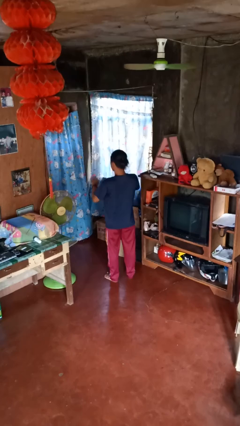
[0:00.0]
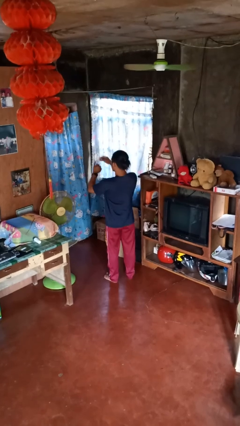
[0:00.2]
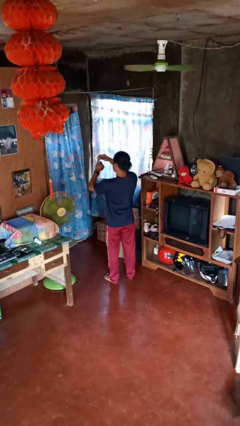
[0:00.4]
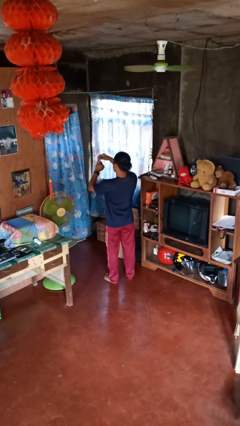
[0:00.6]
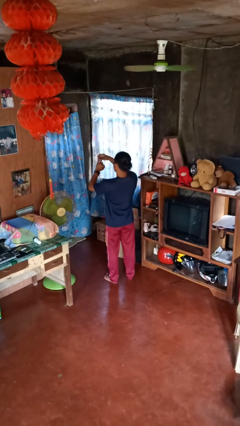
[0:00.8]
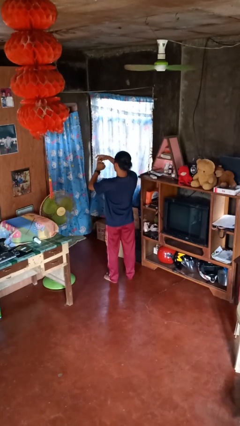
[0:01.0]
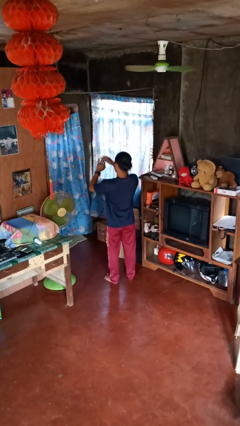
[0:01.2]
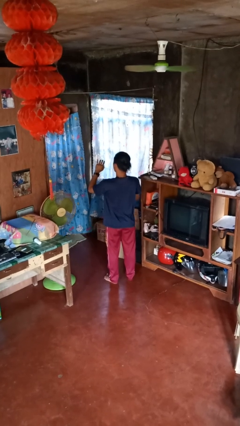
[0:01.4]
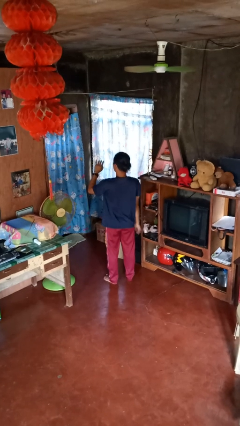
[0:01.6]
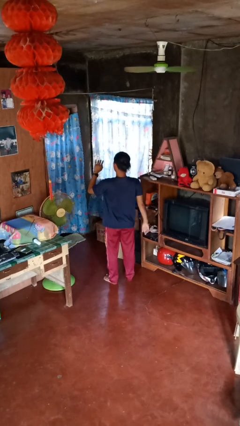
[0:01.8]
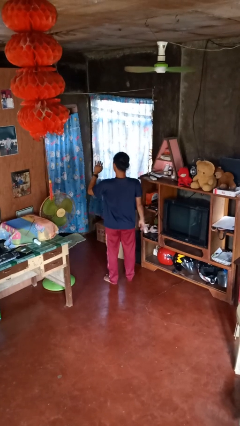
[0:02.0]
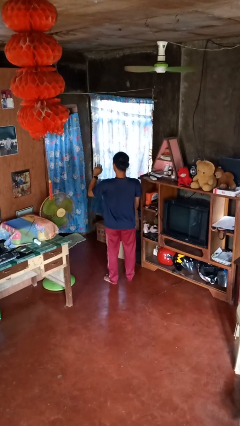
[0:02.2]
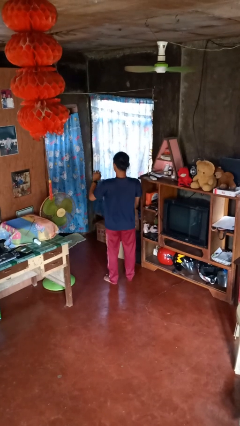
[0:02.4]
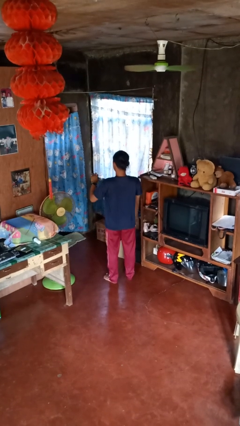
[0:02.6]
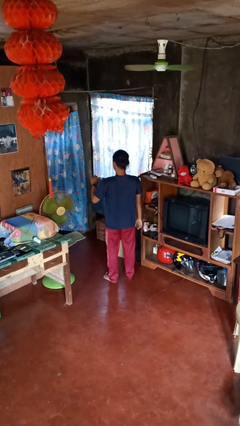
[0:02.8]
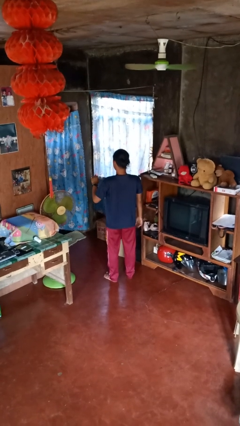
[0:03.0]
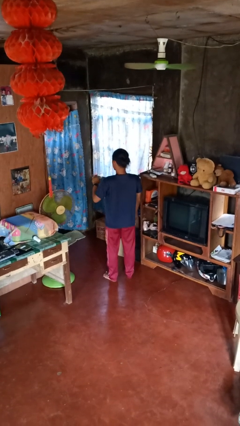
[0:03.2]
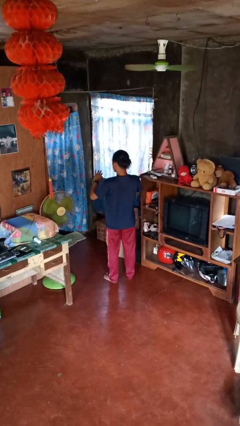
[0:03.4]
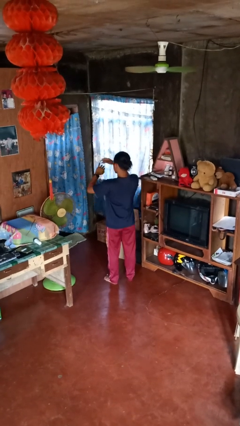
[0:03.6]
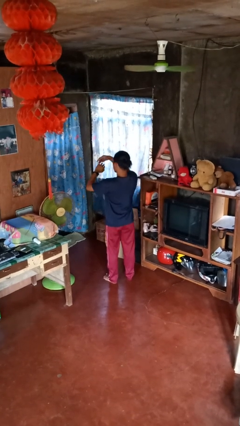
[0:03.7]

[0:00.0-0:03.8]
person puts on ring

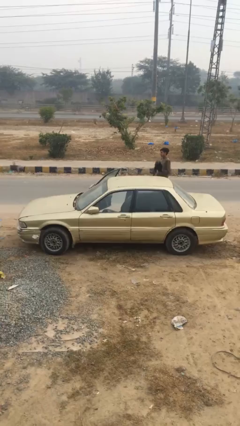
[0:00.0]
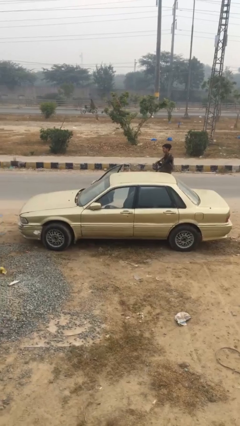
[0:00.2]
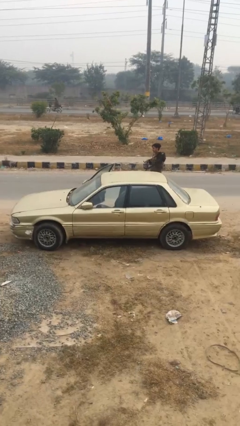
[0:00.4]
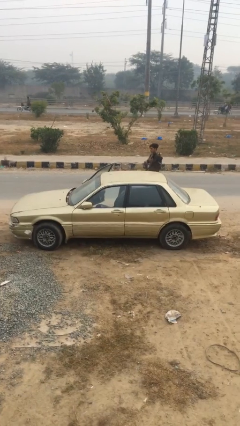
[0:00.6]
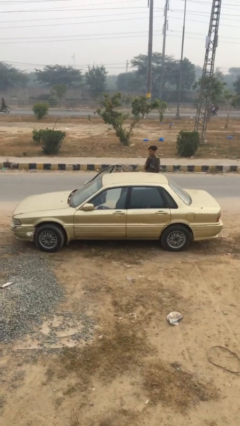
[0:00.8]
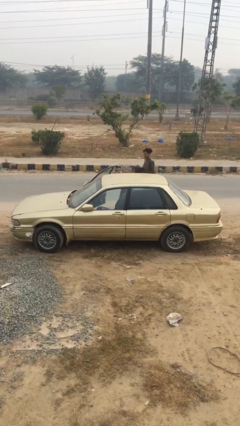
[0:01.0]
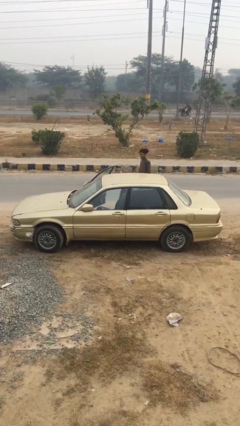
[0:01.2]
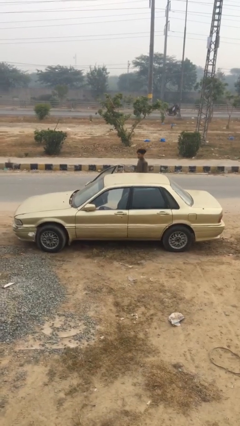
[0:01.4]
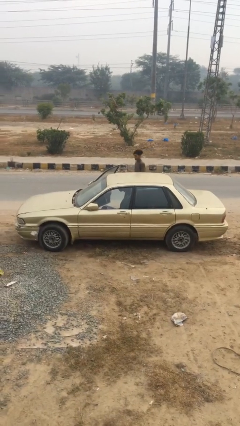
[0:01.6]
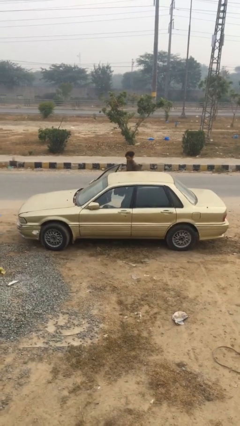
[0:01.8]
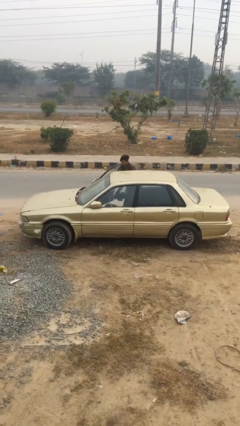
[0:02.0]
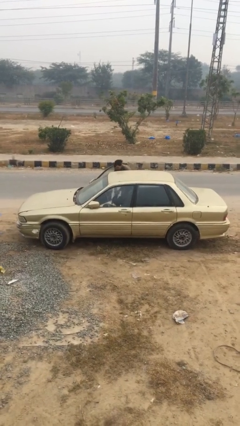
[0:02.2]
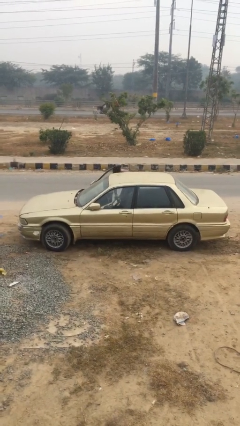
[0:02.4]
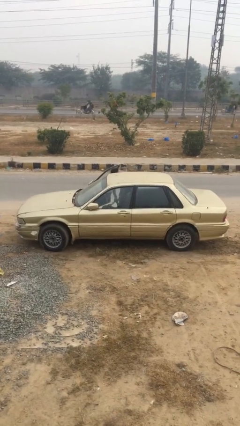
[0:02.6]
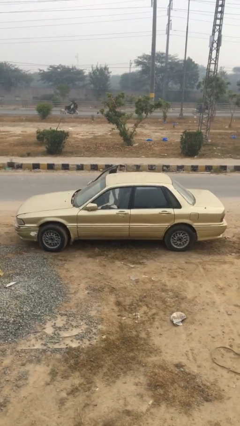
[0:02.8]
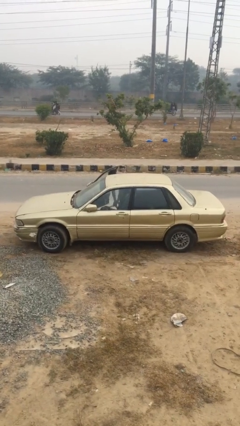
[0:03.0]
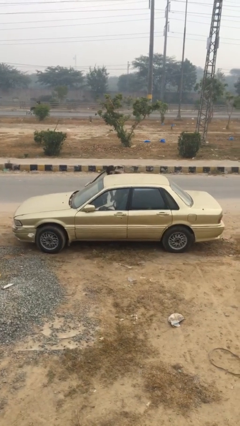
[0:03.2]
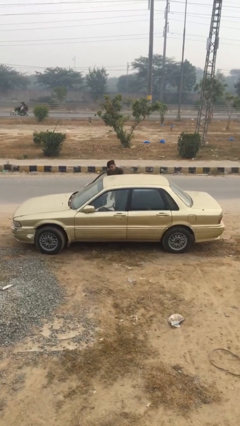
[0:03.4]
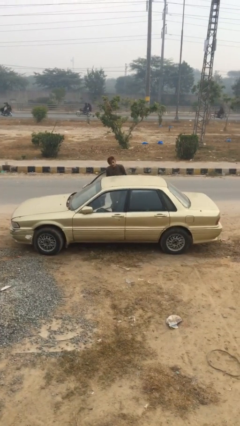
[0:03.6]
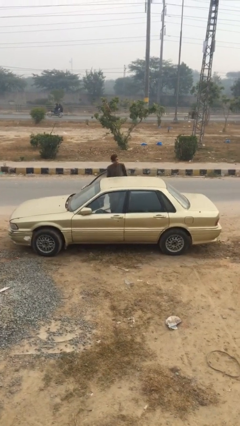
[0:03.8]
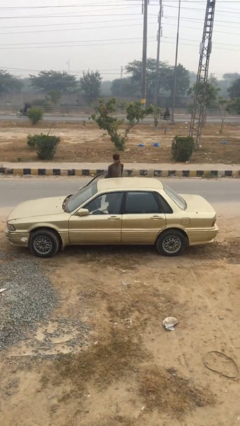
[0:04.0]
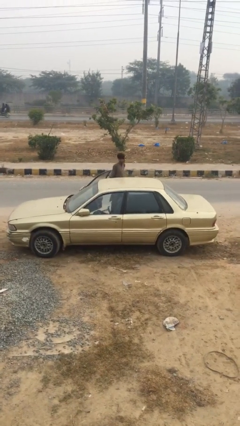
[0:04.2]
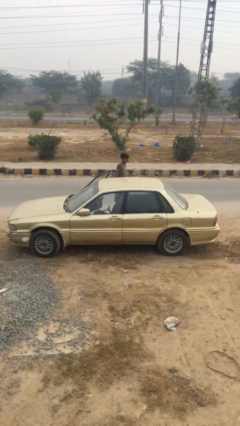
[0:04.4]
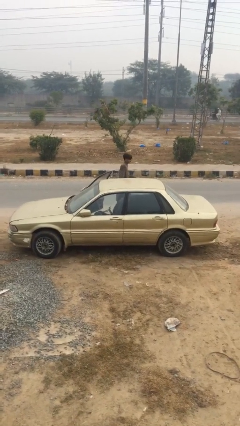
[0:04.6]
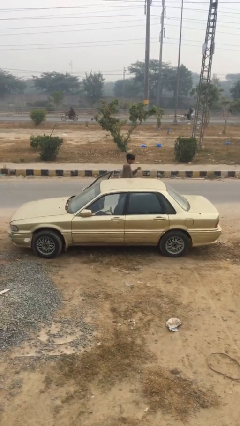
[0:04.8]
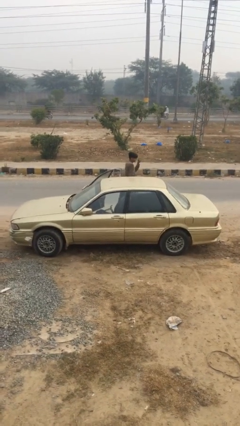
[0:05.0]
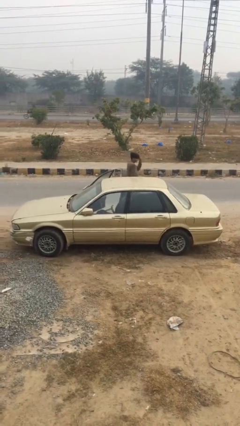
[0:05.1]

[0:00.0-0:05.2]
person loads car

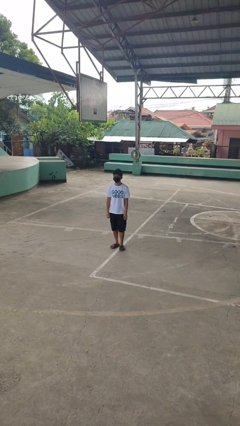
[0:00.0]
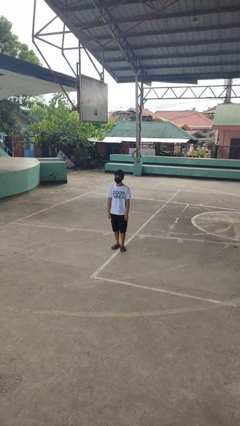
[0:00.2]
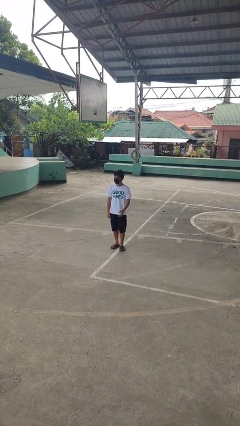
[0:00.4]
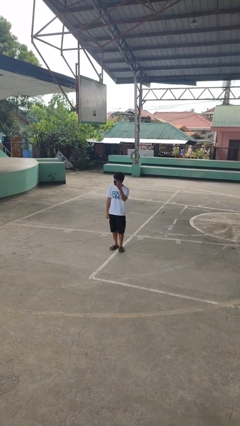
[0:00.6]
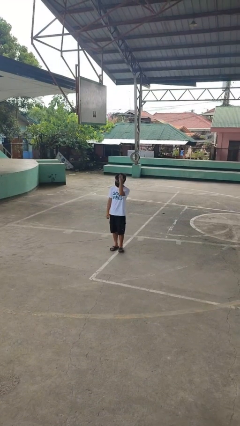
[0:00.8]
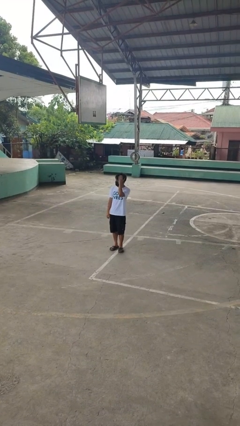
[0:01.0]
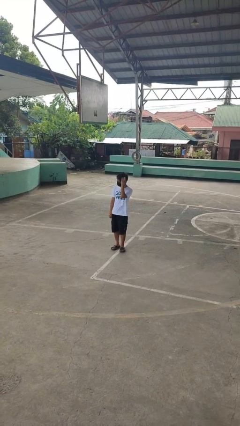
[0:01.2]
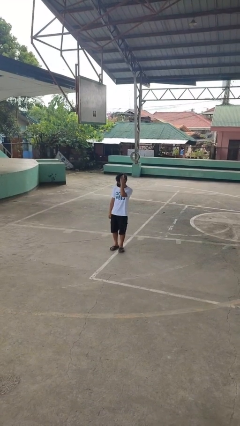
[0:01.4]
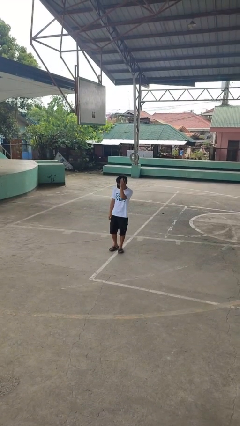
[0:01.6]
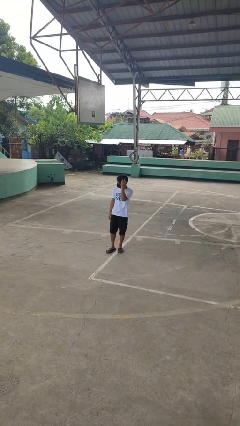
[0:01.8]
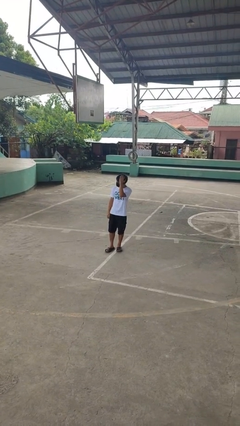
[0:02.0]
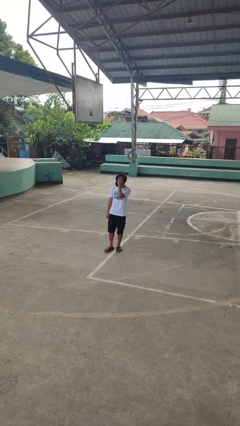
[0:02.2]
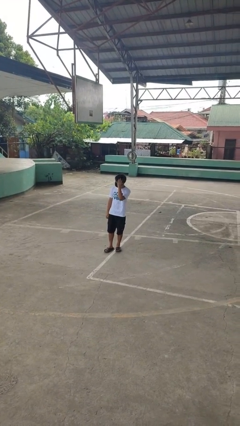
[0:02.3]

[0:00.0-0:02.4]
person pats head

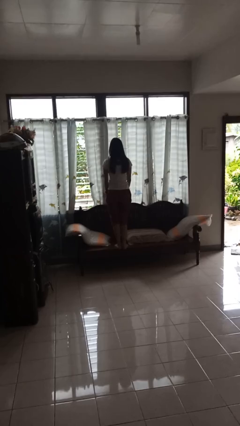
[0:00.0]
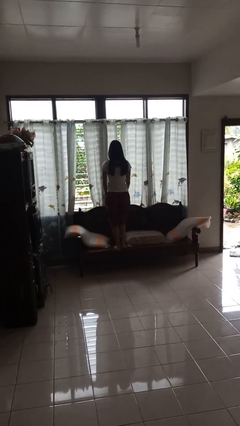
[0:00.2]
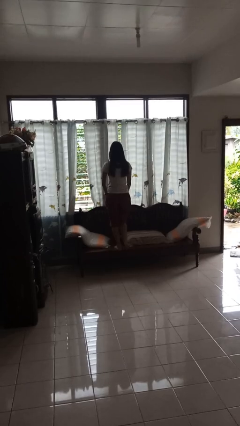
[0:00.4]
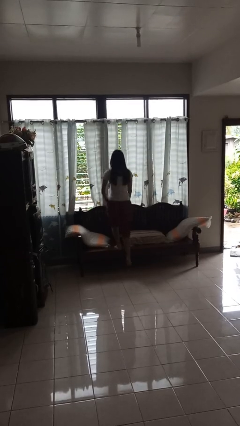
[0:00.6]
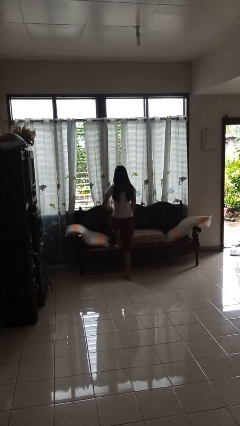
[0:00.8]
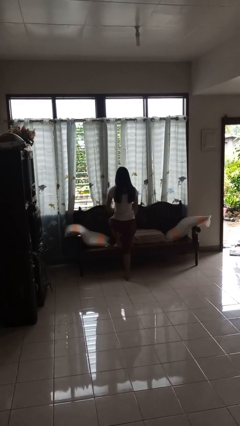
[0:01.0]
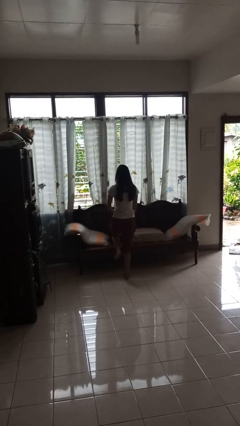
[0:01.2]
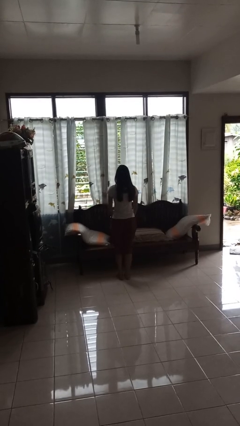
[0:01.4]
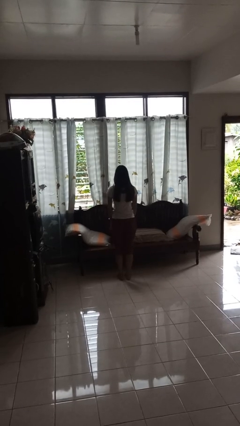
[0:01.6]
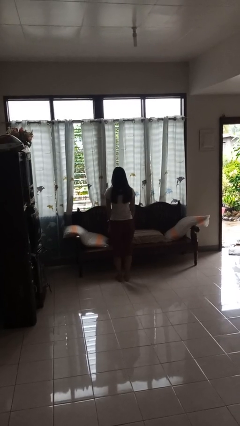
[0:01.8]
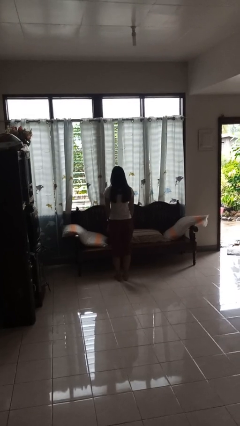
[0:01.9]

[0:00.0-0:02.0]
person climbs off couch

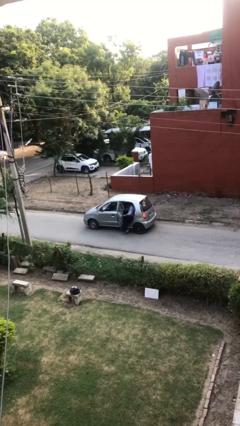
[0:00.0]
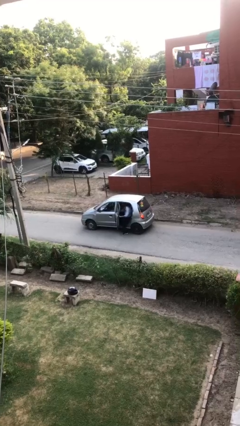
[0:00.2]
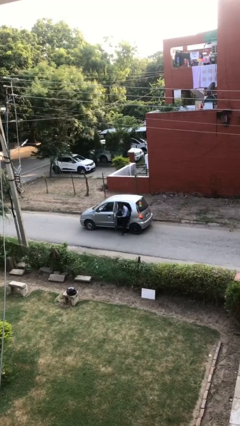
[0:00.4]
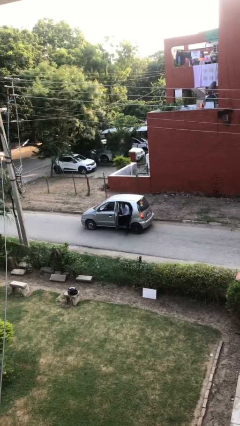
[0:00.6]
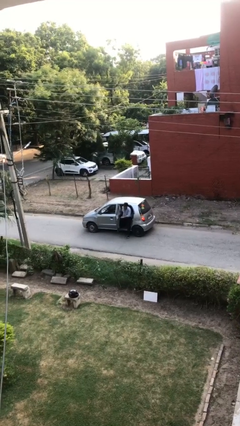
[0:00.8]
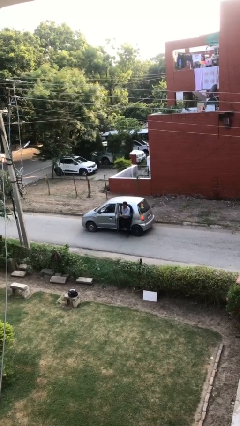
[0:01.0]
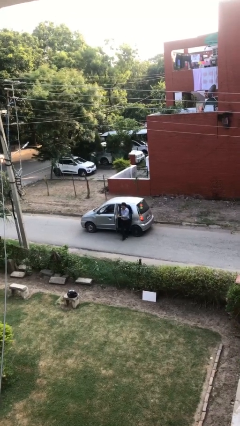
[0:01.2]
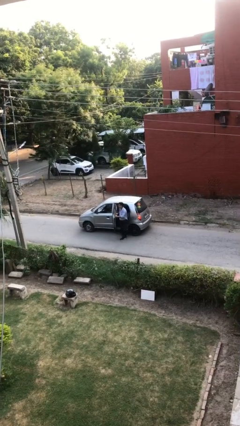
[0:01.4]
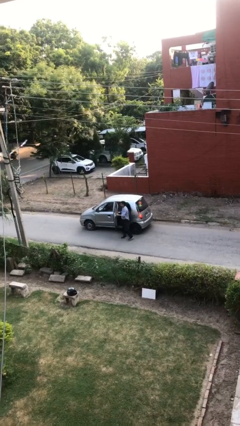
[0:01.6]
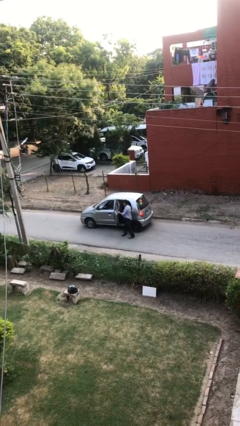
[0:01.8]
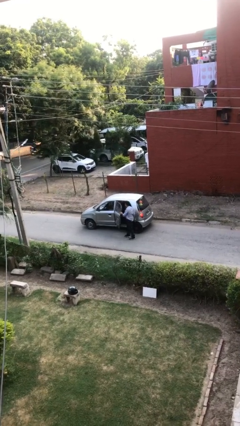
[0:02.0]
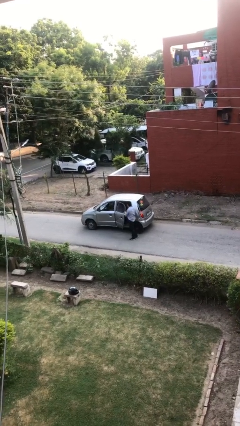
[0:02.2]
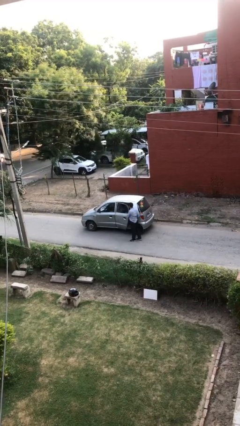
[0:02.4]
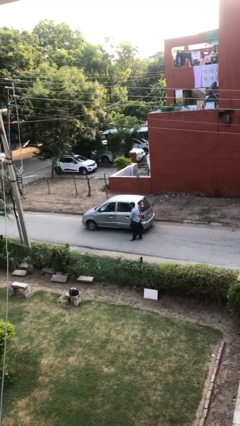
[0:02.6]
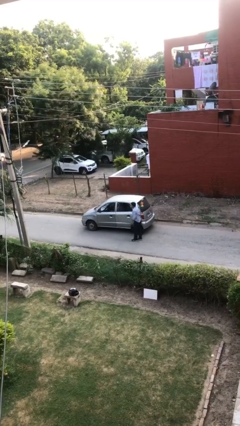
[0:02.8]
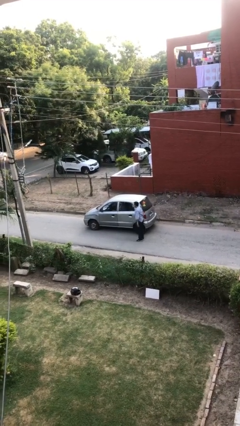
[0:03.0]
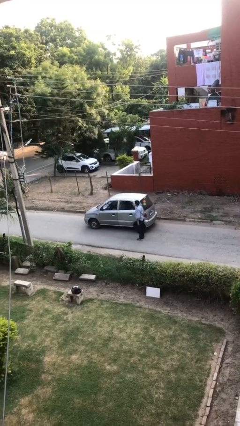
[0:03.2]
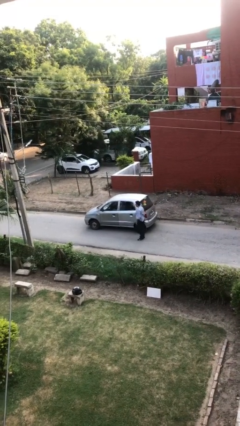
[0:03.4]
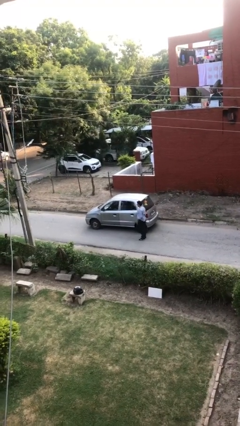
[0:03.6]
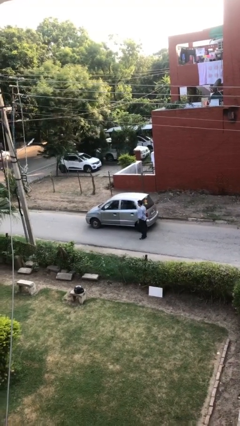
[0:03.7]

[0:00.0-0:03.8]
car drops off person

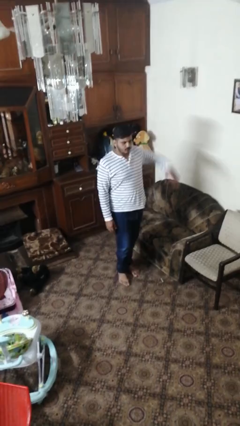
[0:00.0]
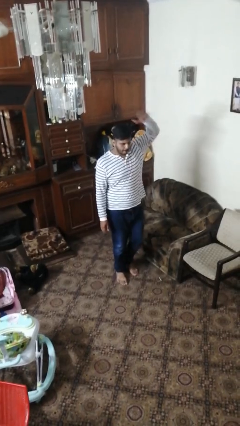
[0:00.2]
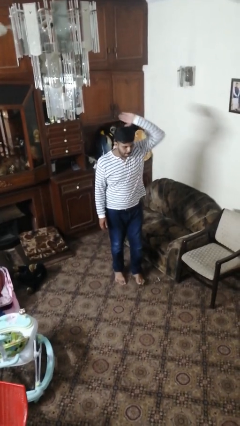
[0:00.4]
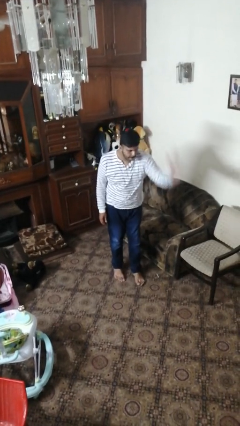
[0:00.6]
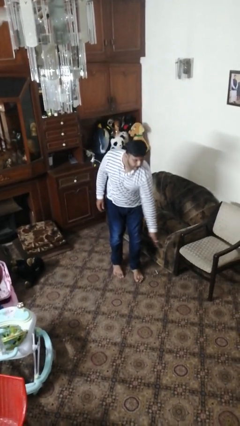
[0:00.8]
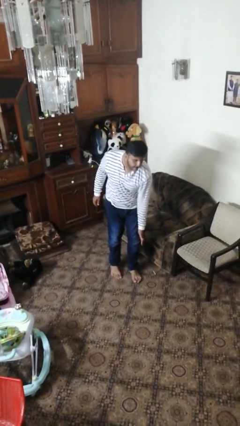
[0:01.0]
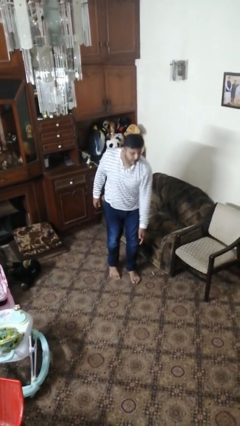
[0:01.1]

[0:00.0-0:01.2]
person karate chop
